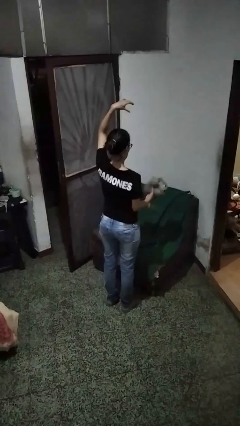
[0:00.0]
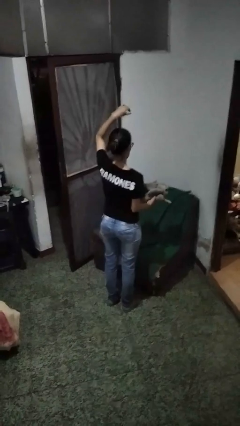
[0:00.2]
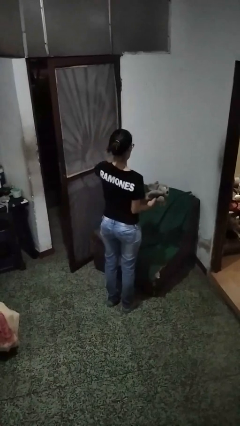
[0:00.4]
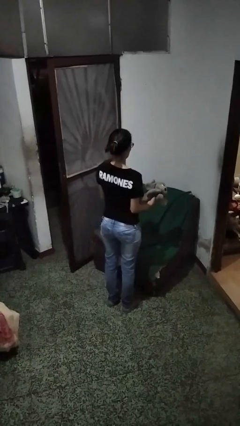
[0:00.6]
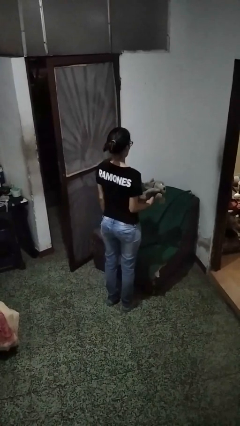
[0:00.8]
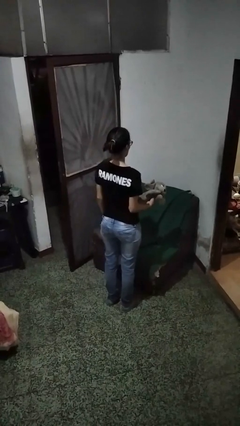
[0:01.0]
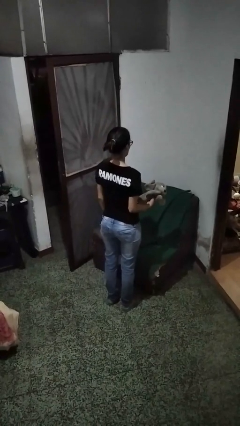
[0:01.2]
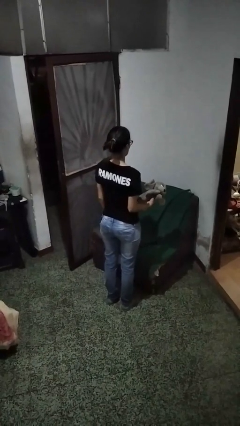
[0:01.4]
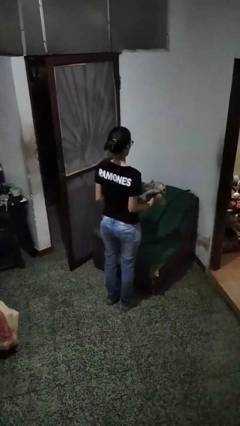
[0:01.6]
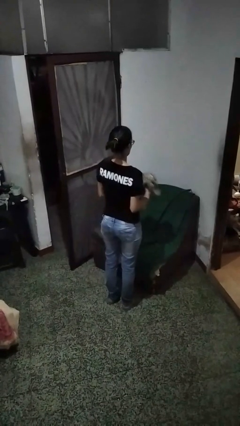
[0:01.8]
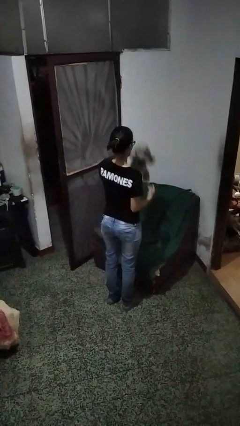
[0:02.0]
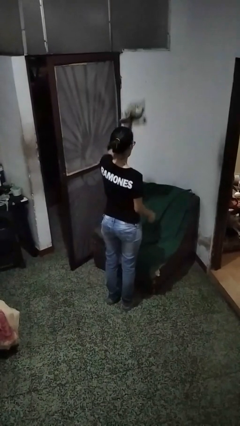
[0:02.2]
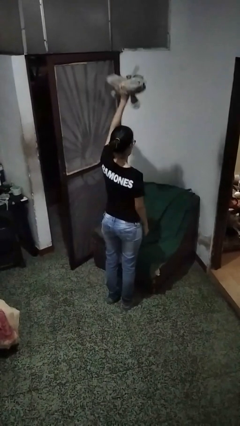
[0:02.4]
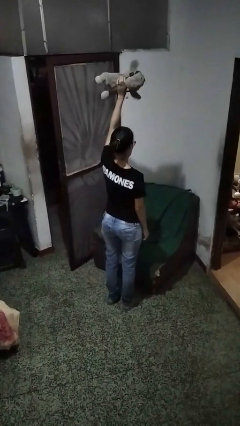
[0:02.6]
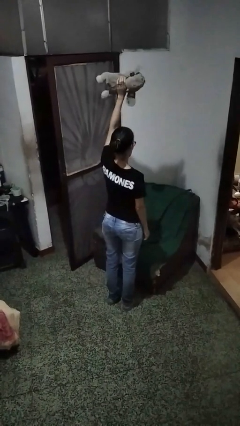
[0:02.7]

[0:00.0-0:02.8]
person catches dropped object

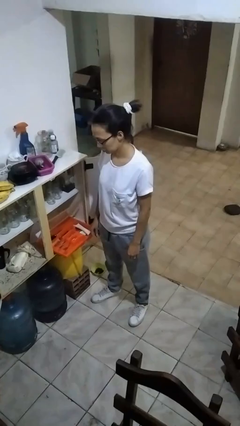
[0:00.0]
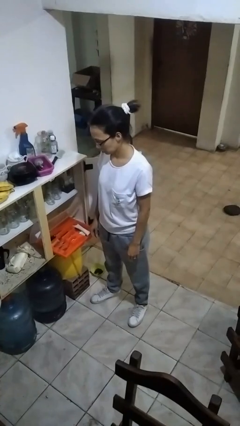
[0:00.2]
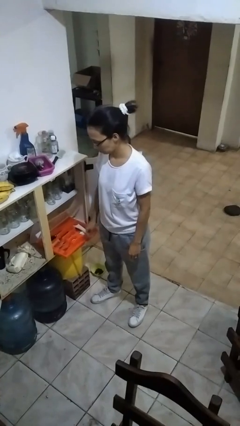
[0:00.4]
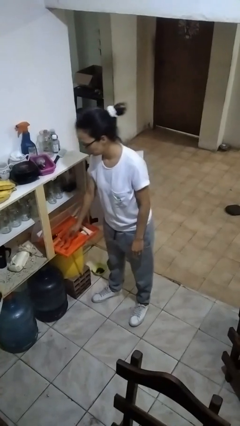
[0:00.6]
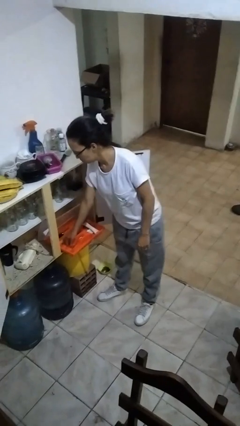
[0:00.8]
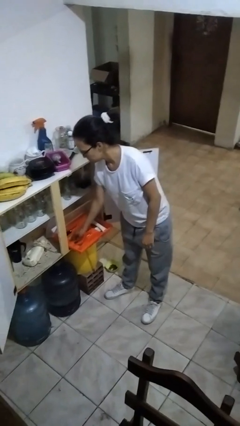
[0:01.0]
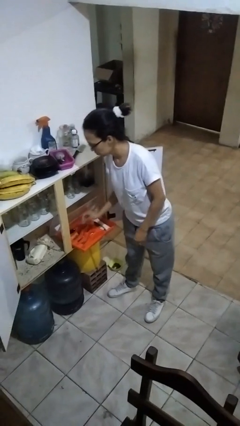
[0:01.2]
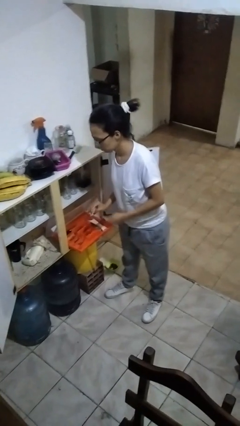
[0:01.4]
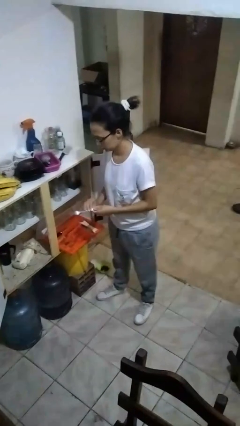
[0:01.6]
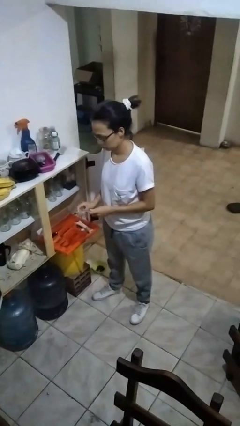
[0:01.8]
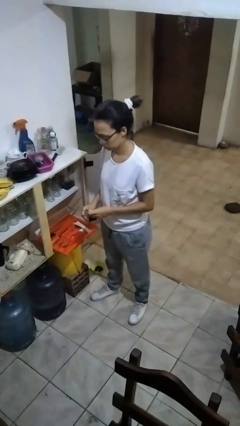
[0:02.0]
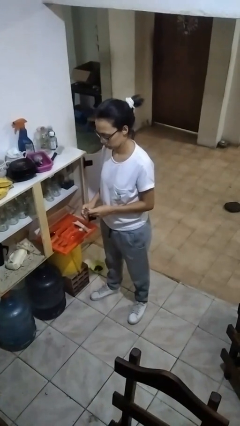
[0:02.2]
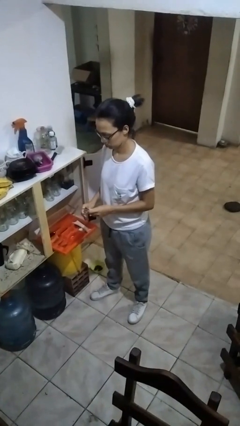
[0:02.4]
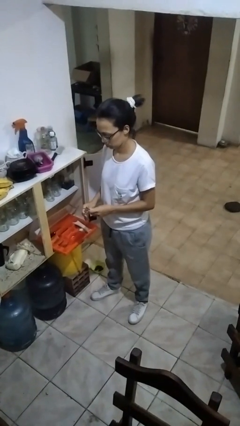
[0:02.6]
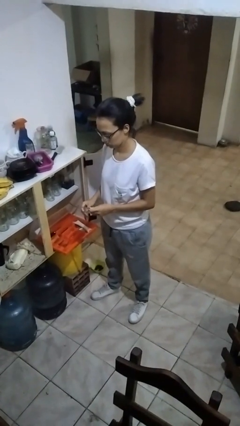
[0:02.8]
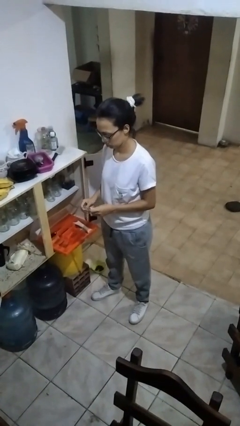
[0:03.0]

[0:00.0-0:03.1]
person takes object from kitchen drawer

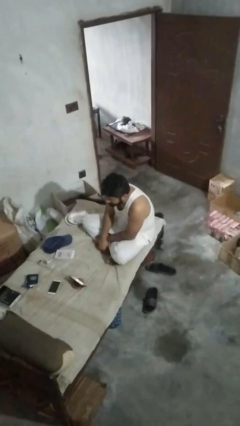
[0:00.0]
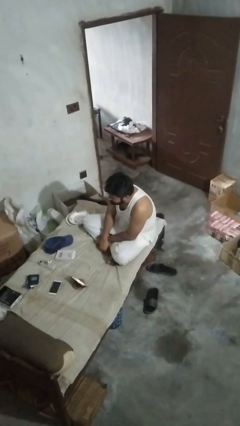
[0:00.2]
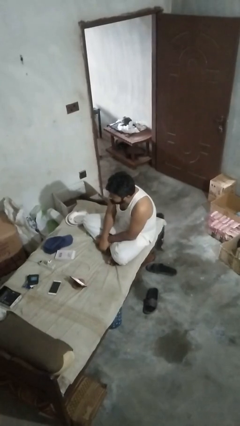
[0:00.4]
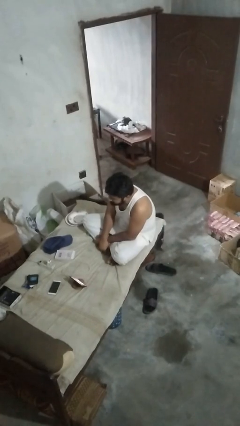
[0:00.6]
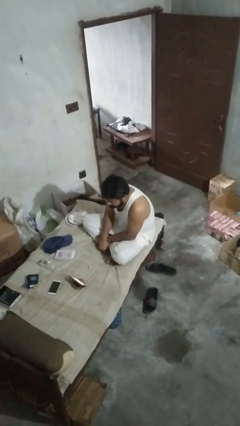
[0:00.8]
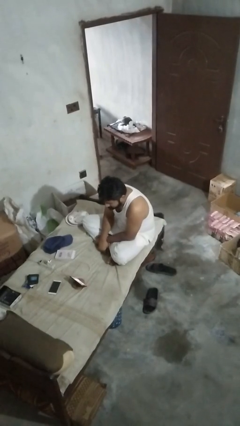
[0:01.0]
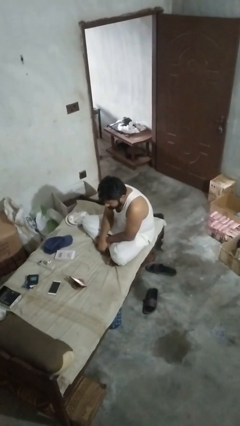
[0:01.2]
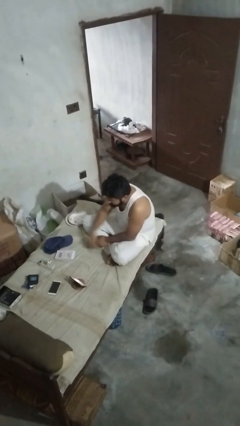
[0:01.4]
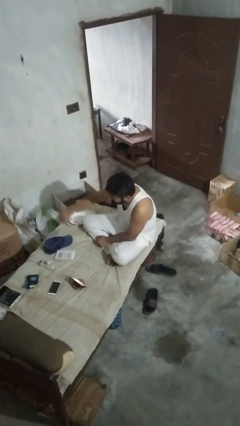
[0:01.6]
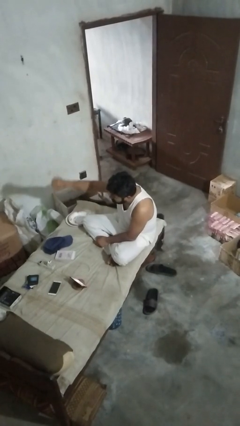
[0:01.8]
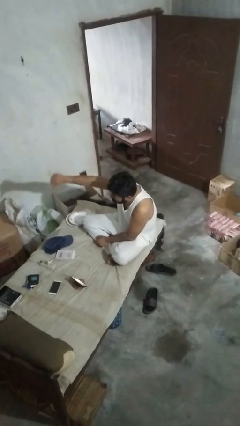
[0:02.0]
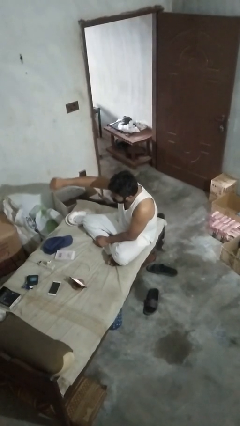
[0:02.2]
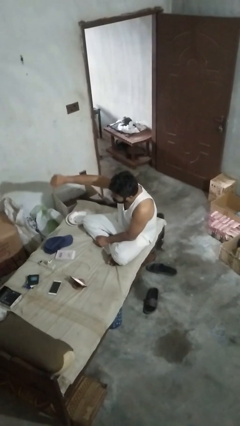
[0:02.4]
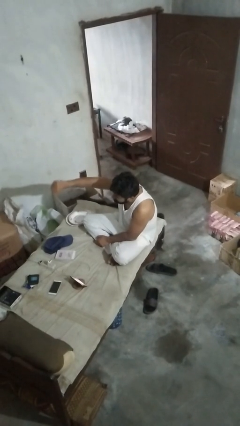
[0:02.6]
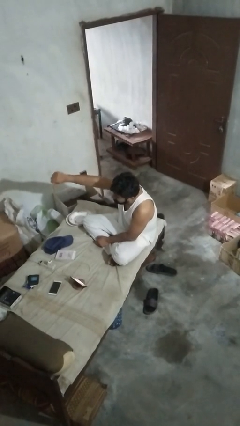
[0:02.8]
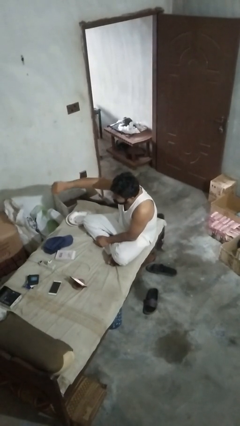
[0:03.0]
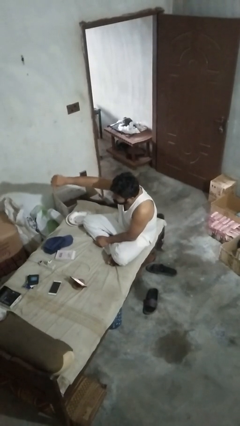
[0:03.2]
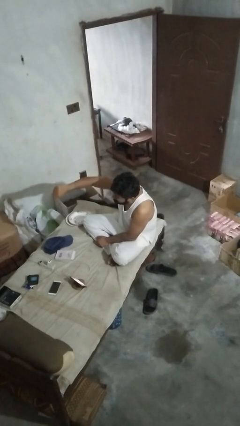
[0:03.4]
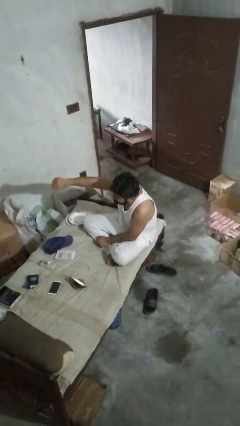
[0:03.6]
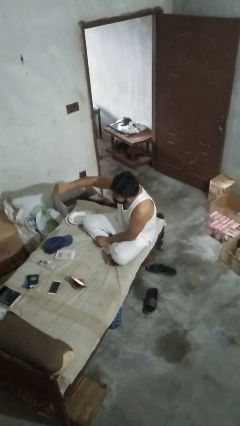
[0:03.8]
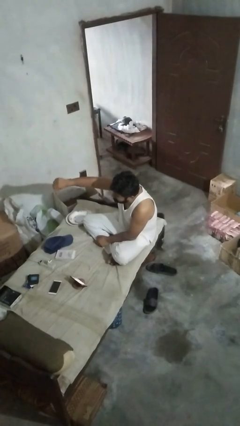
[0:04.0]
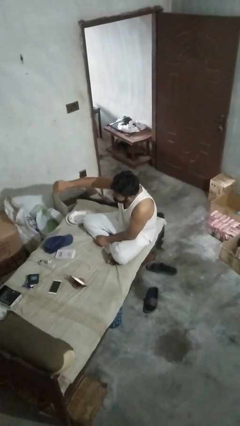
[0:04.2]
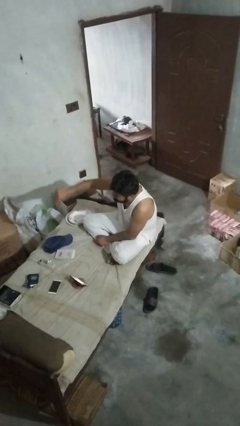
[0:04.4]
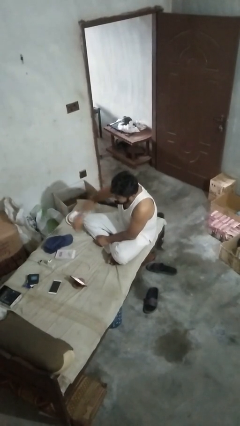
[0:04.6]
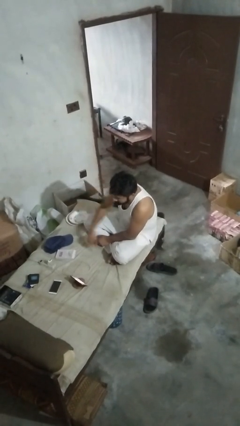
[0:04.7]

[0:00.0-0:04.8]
person gestures thumbs down

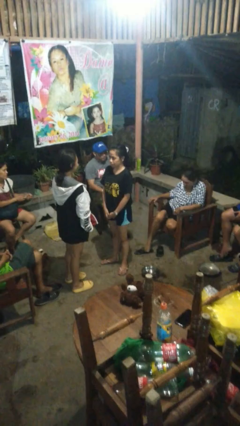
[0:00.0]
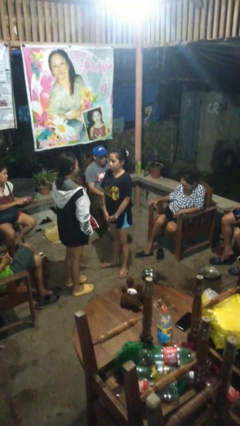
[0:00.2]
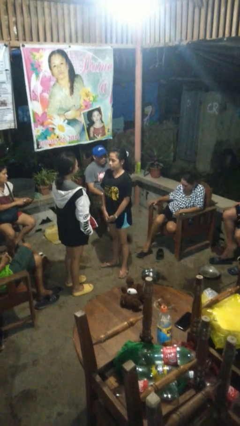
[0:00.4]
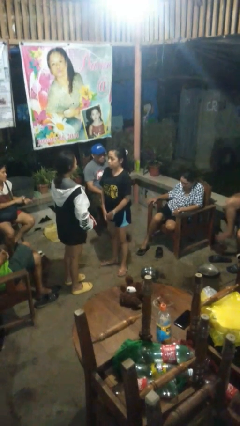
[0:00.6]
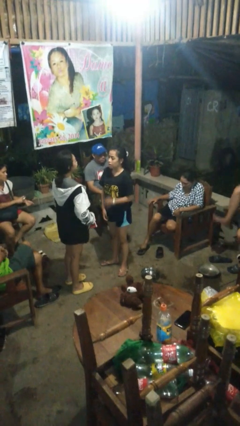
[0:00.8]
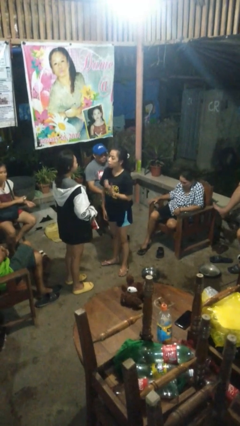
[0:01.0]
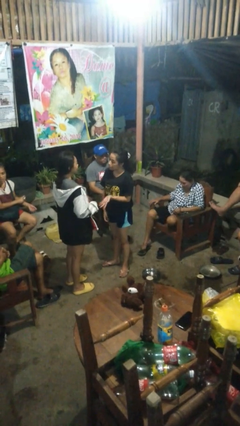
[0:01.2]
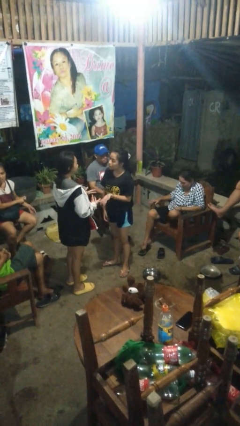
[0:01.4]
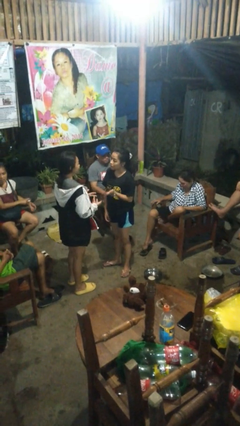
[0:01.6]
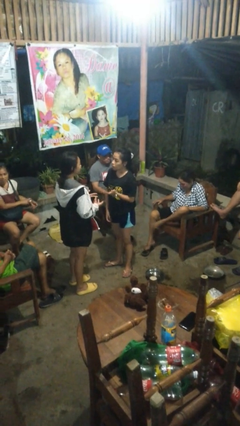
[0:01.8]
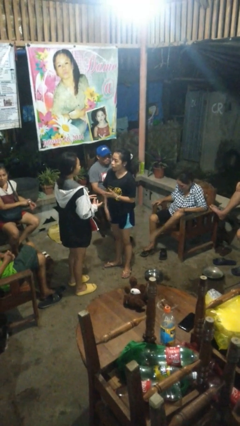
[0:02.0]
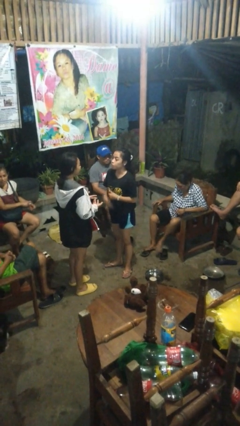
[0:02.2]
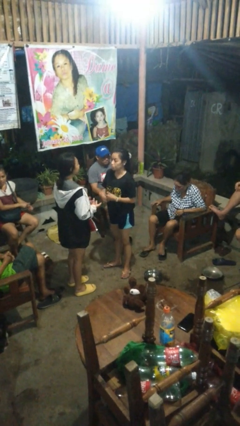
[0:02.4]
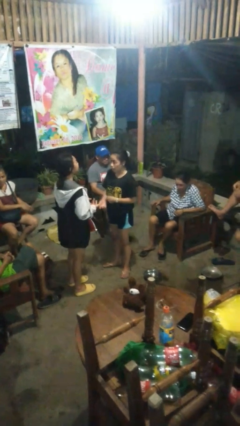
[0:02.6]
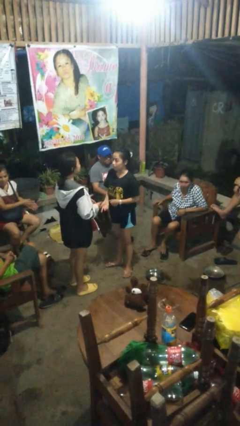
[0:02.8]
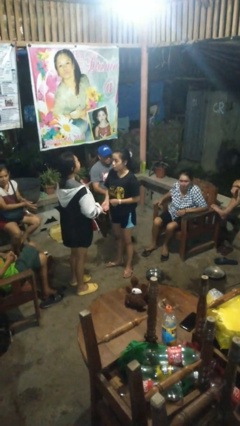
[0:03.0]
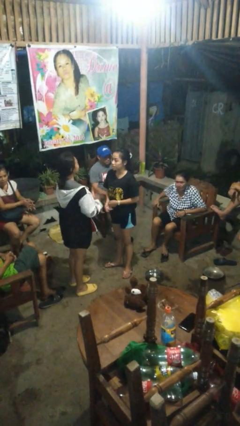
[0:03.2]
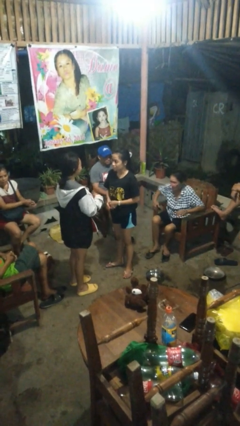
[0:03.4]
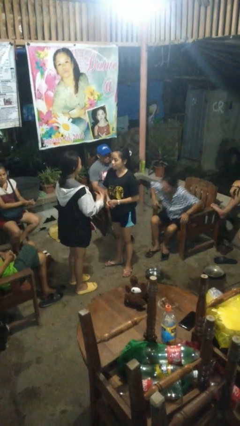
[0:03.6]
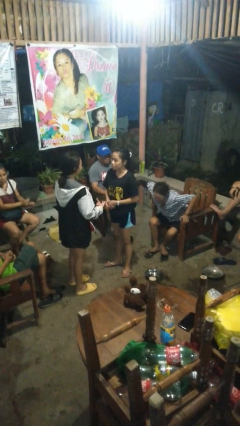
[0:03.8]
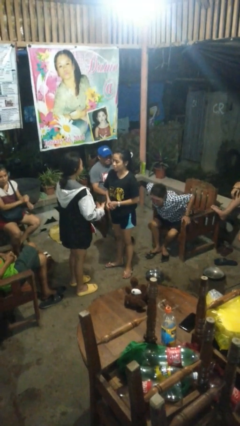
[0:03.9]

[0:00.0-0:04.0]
person talks to person

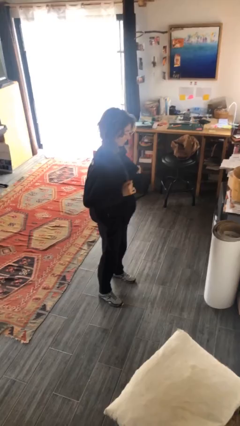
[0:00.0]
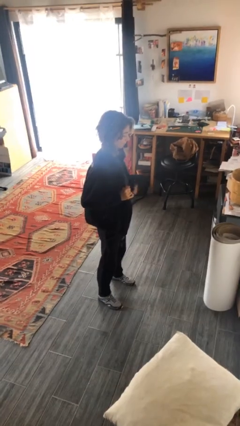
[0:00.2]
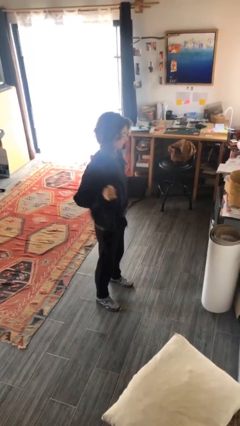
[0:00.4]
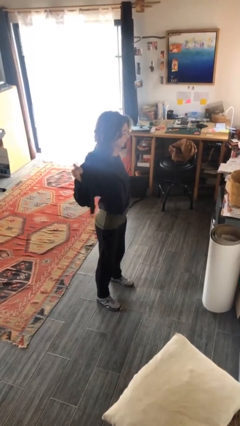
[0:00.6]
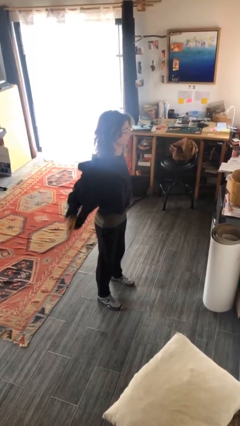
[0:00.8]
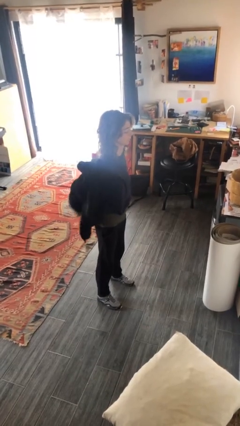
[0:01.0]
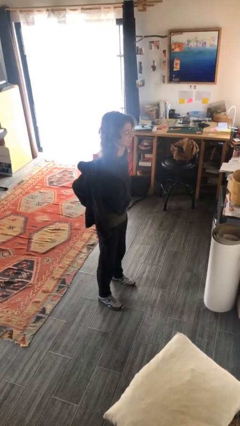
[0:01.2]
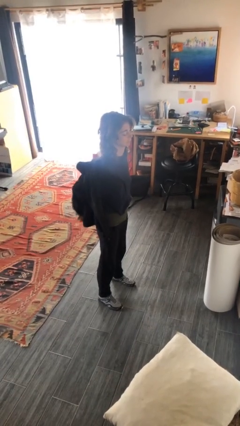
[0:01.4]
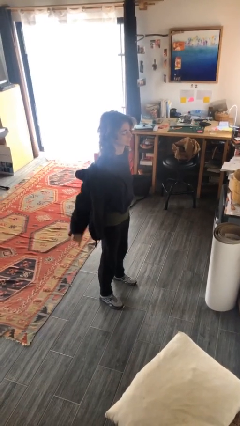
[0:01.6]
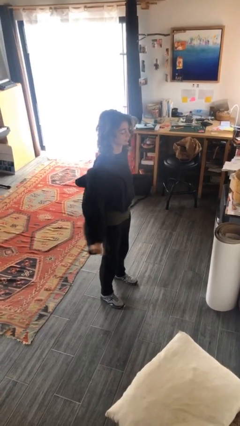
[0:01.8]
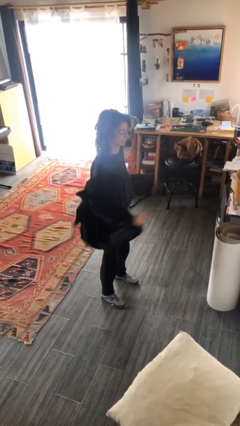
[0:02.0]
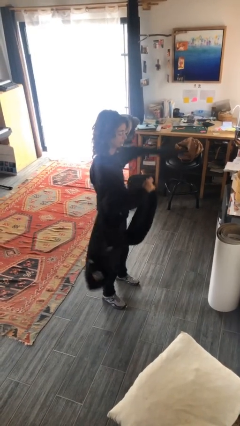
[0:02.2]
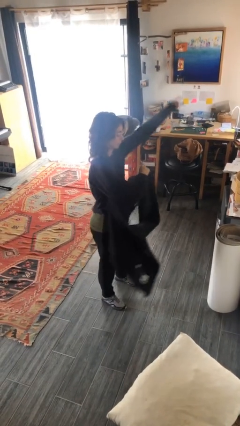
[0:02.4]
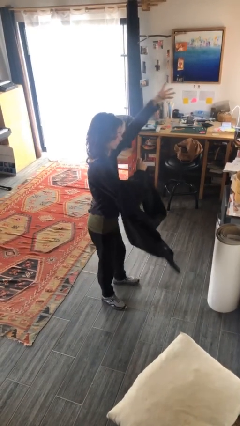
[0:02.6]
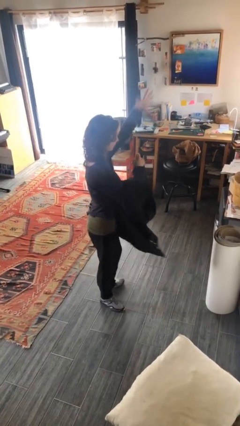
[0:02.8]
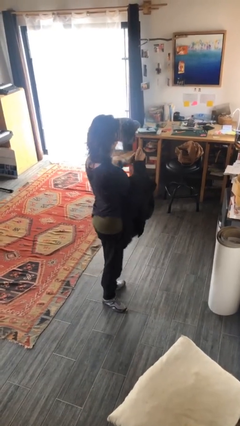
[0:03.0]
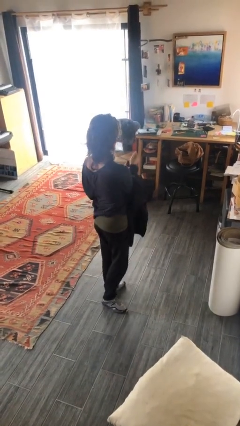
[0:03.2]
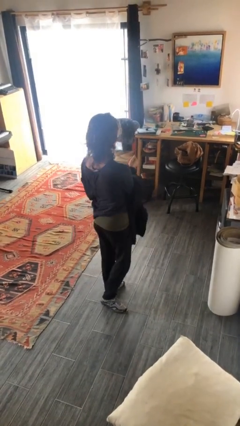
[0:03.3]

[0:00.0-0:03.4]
person takes off jacket
